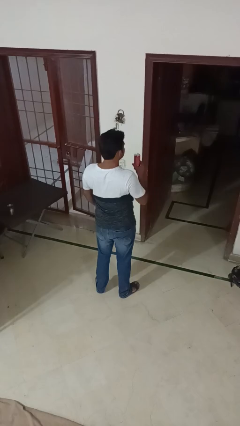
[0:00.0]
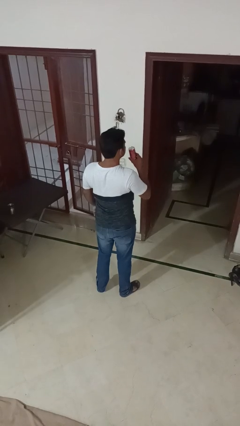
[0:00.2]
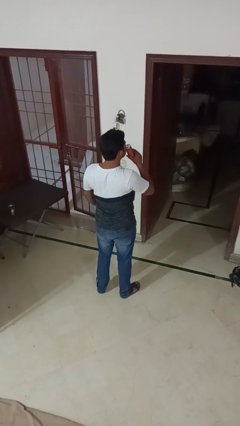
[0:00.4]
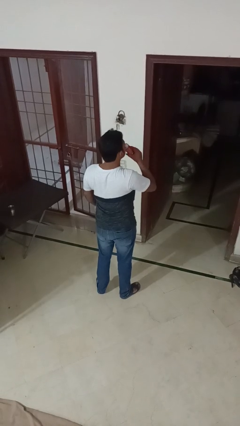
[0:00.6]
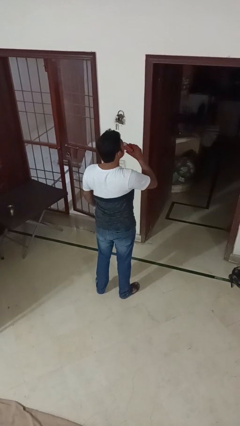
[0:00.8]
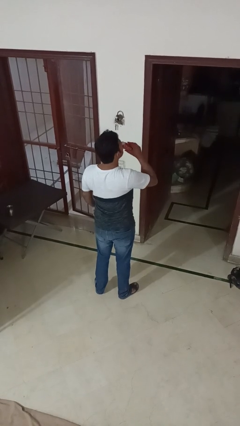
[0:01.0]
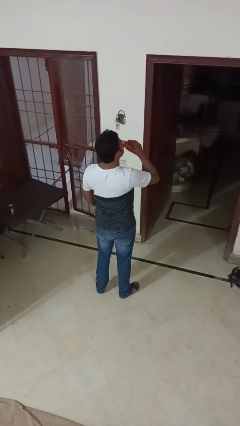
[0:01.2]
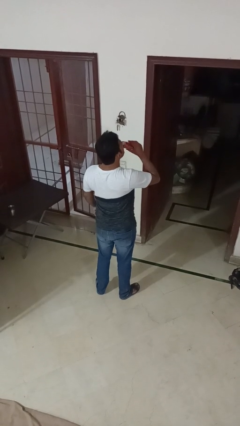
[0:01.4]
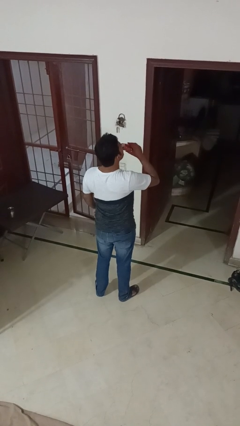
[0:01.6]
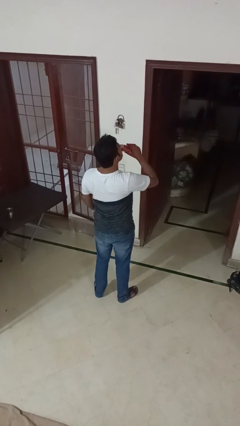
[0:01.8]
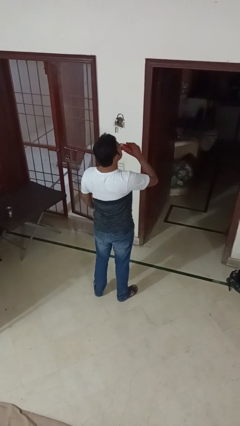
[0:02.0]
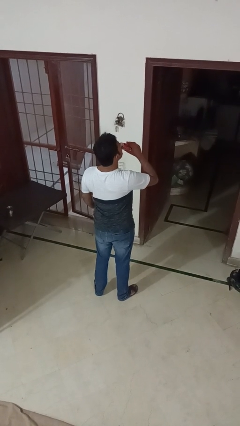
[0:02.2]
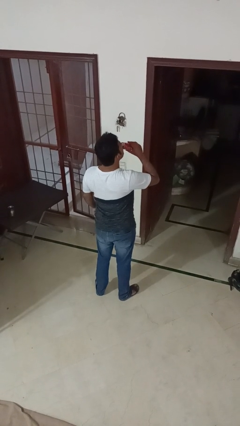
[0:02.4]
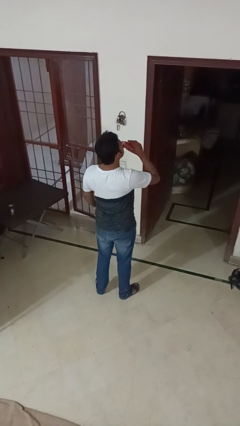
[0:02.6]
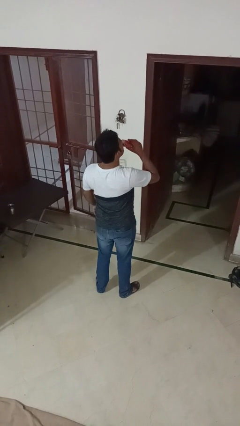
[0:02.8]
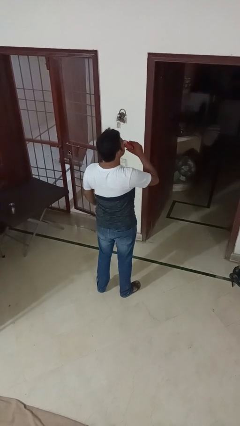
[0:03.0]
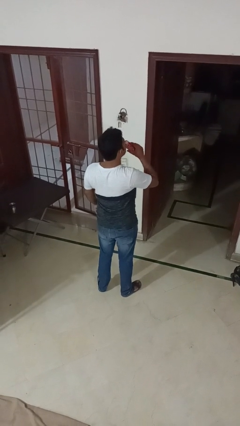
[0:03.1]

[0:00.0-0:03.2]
person drinks from beverage can

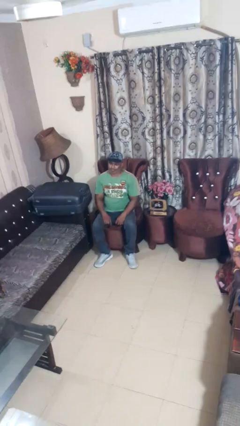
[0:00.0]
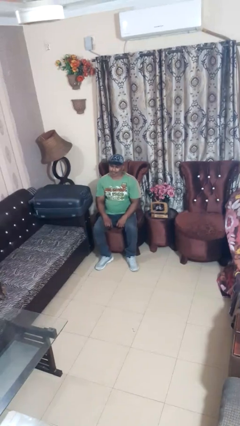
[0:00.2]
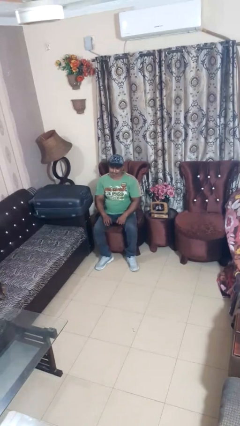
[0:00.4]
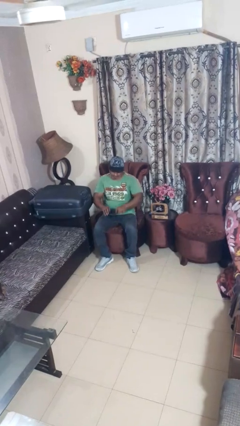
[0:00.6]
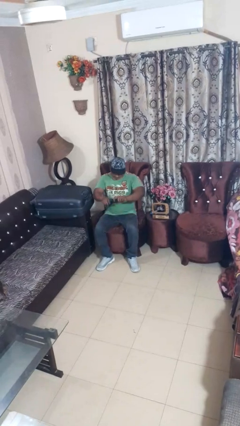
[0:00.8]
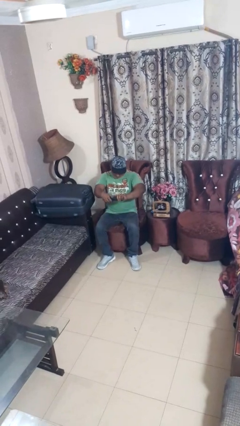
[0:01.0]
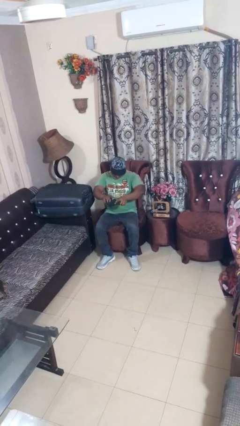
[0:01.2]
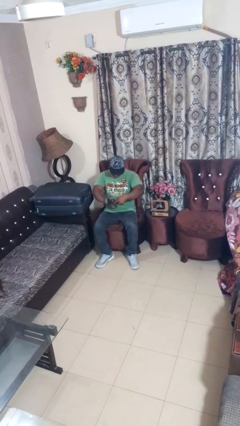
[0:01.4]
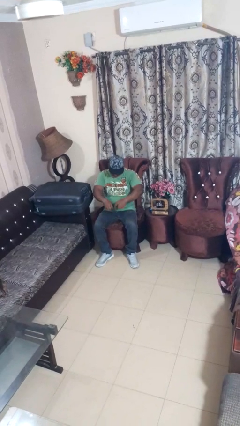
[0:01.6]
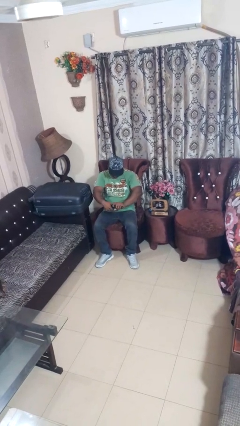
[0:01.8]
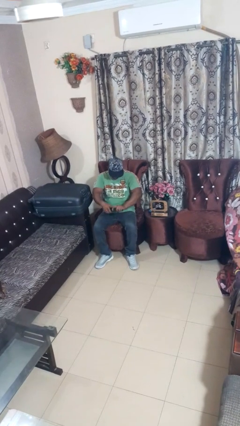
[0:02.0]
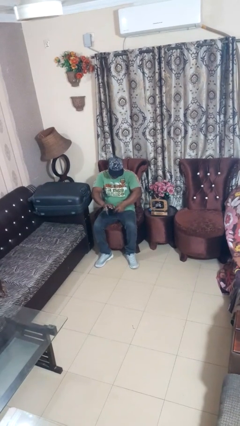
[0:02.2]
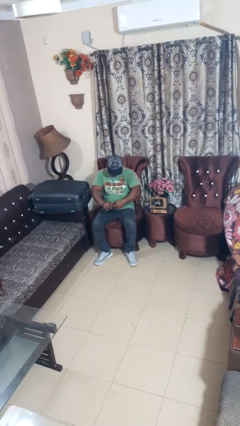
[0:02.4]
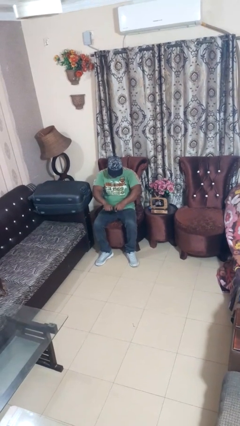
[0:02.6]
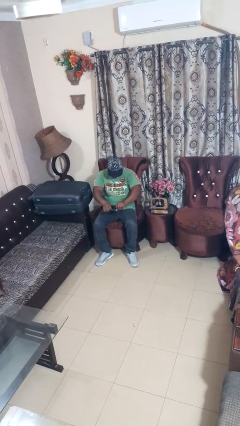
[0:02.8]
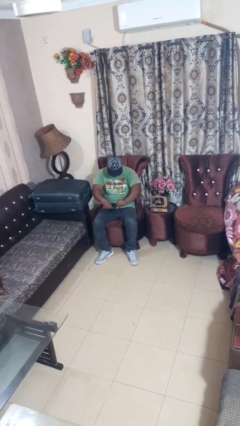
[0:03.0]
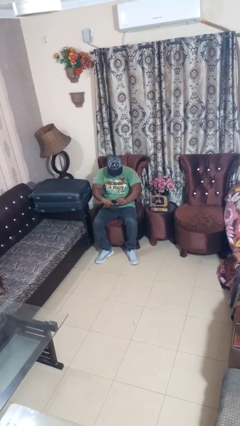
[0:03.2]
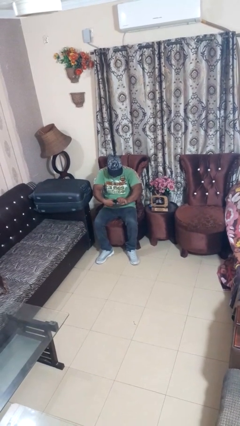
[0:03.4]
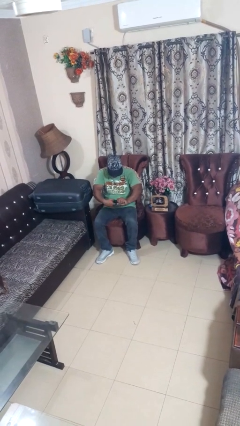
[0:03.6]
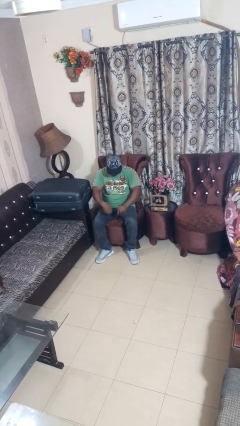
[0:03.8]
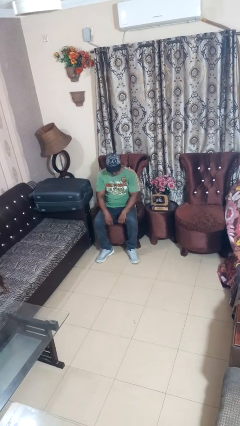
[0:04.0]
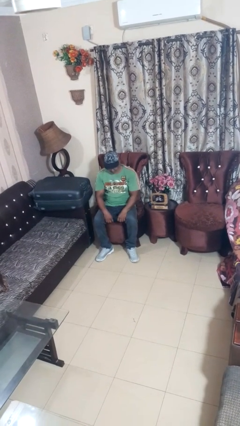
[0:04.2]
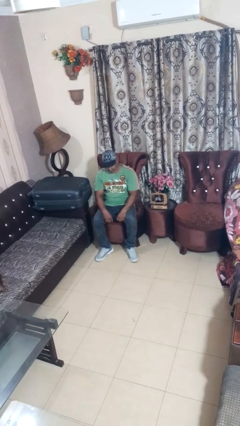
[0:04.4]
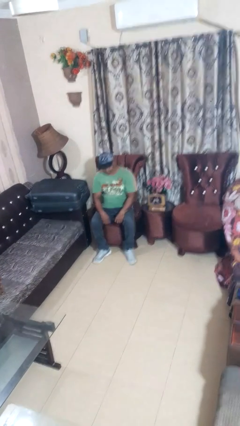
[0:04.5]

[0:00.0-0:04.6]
person squeezes object

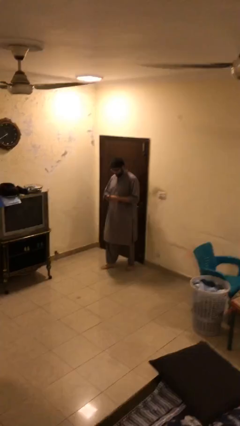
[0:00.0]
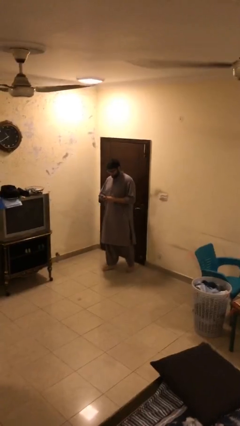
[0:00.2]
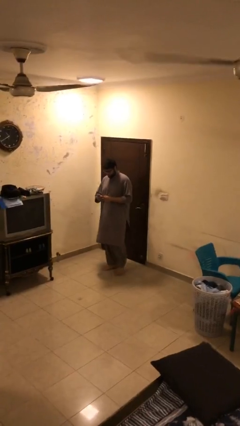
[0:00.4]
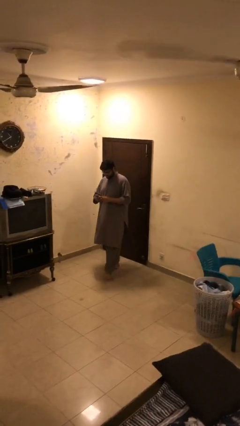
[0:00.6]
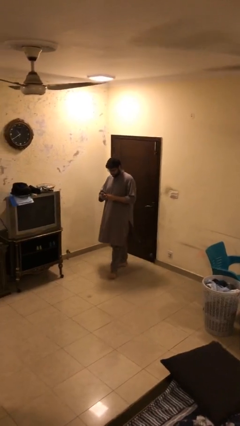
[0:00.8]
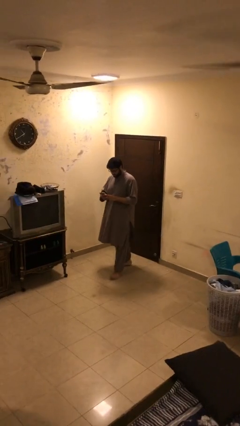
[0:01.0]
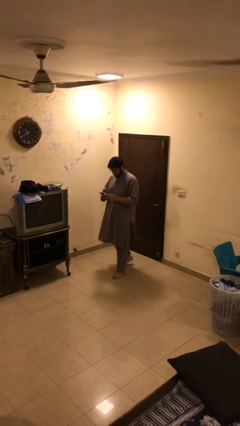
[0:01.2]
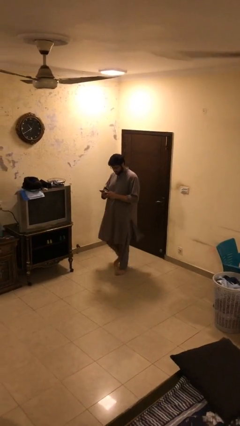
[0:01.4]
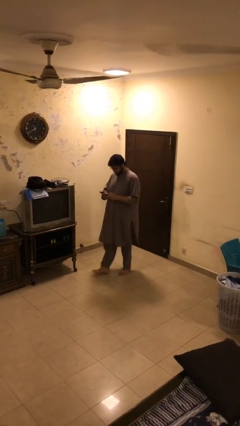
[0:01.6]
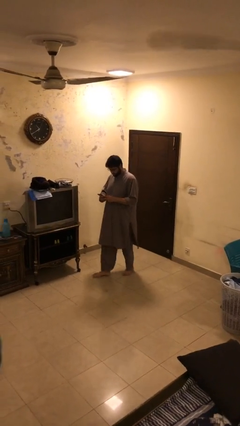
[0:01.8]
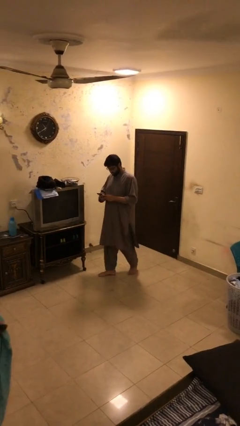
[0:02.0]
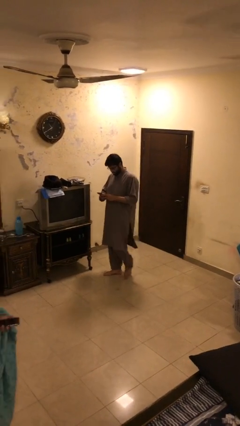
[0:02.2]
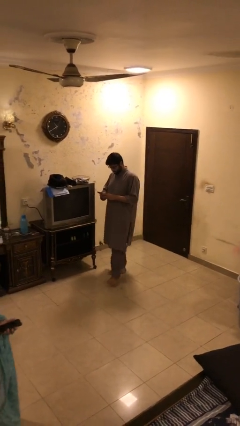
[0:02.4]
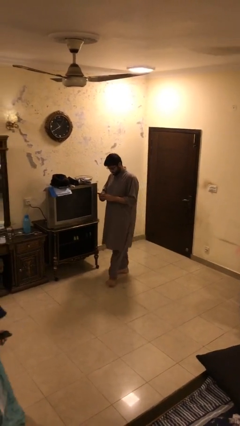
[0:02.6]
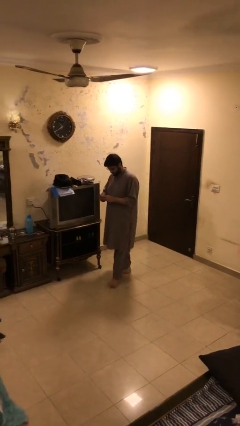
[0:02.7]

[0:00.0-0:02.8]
person texts on phone

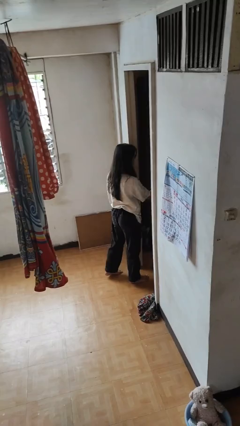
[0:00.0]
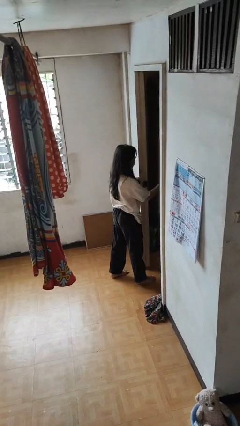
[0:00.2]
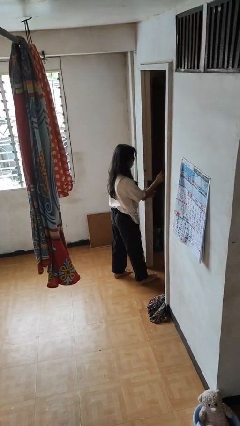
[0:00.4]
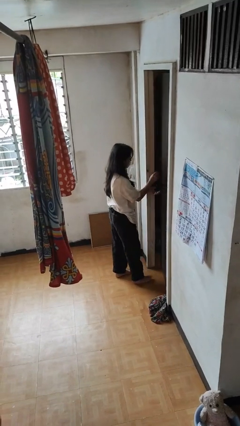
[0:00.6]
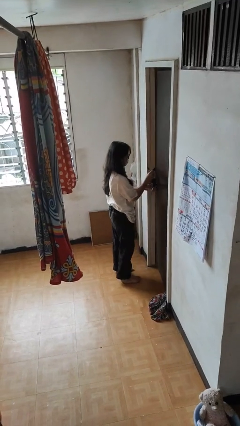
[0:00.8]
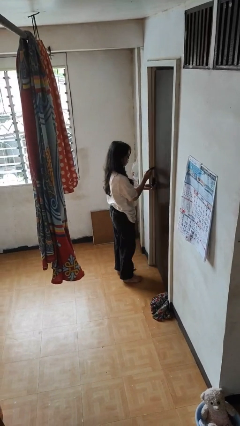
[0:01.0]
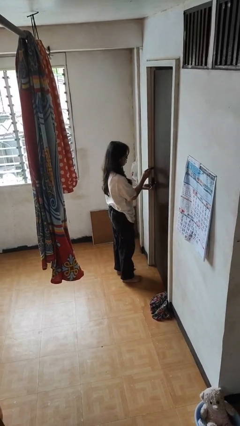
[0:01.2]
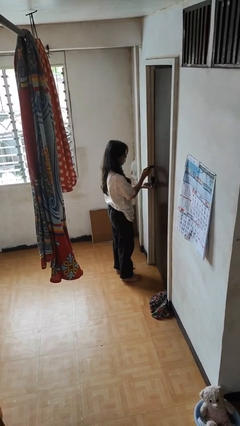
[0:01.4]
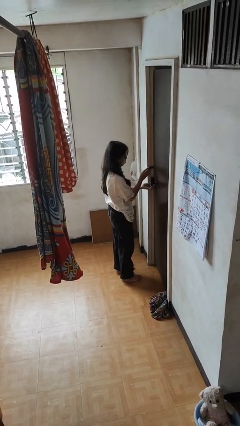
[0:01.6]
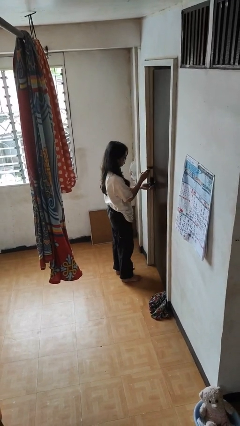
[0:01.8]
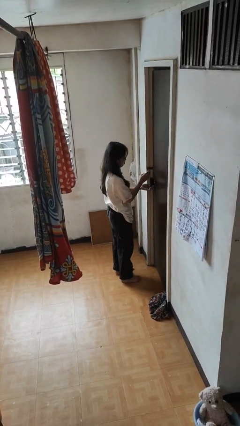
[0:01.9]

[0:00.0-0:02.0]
person closes facility door

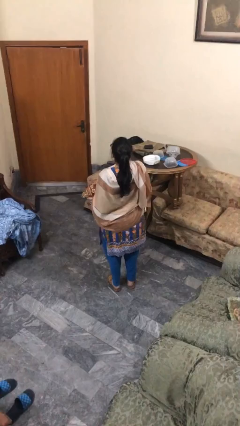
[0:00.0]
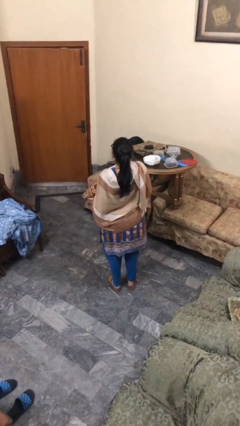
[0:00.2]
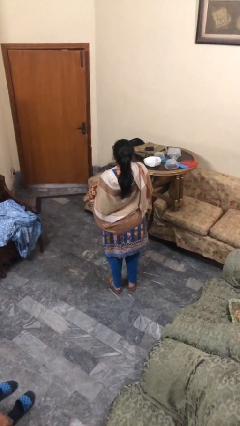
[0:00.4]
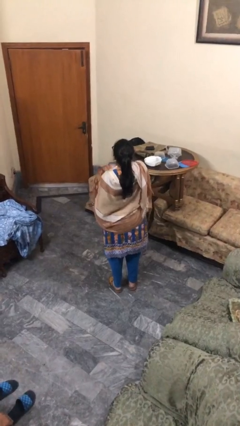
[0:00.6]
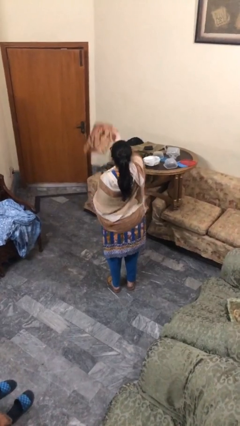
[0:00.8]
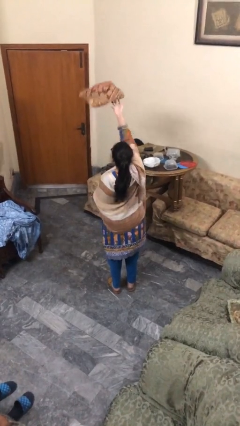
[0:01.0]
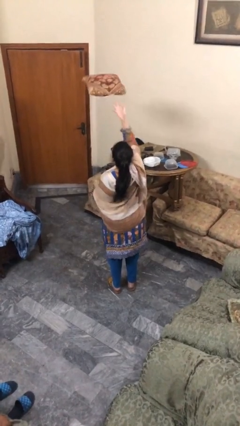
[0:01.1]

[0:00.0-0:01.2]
person drops object

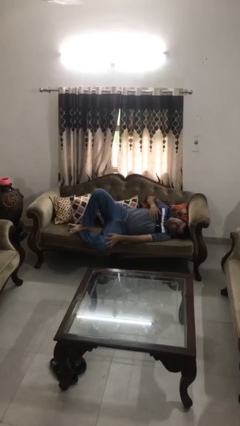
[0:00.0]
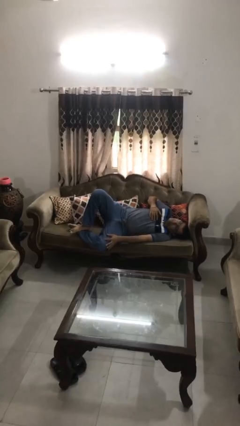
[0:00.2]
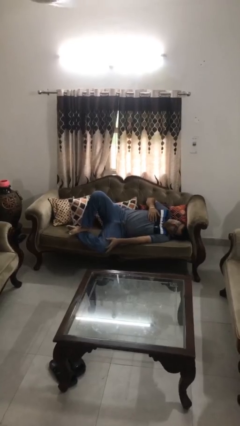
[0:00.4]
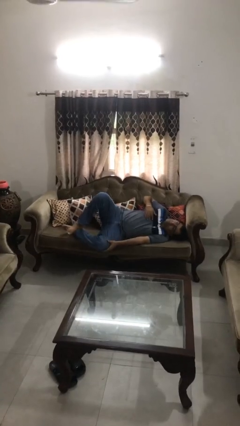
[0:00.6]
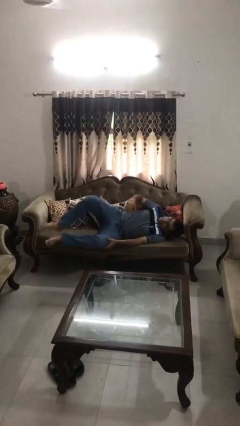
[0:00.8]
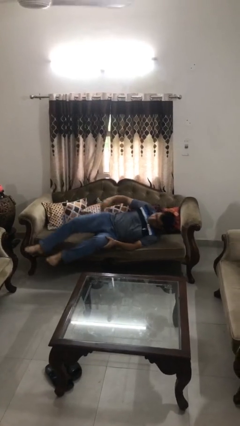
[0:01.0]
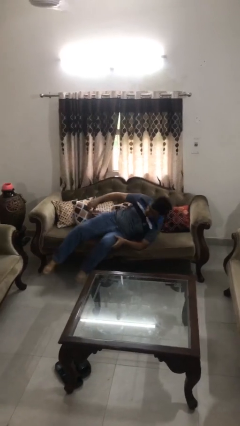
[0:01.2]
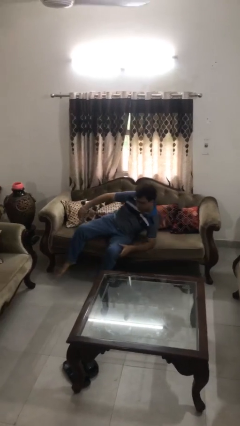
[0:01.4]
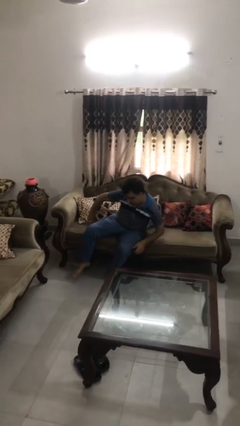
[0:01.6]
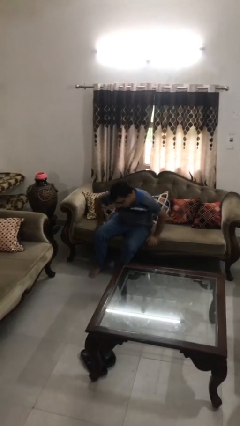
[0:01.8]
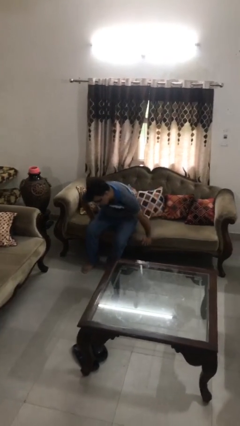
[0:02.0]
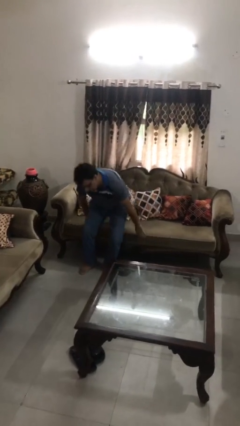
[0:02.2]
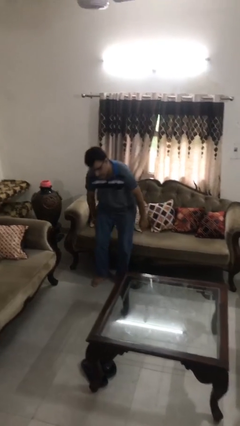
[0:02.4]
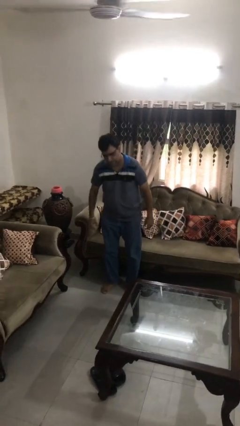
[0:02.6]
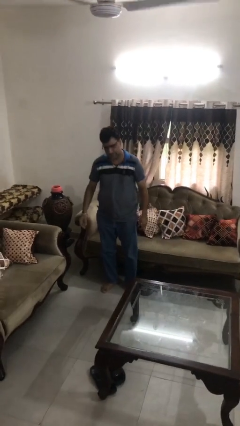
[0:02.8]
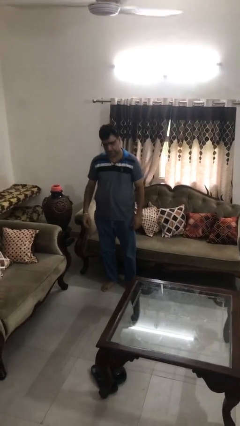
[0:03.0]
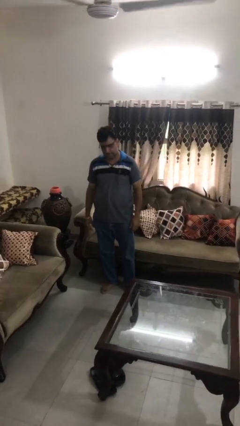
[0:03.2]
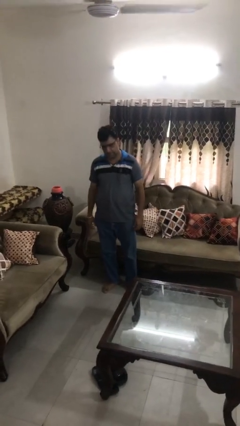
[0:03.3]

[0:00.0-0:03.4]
person stands up
